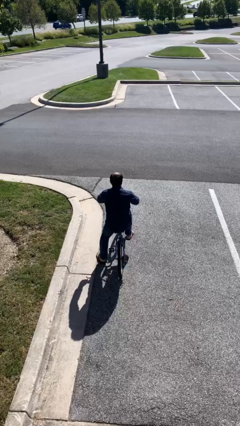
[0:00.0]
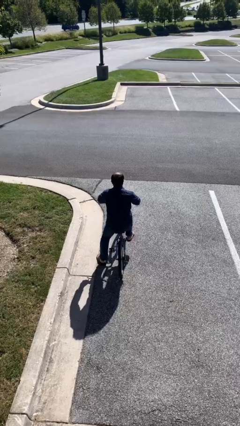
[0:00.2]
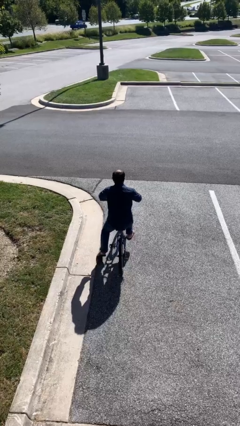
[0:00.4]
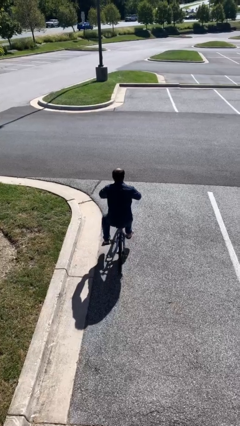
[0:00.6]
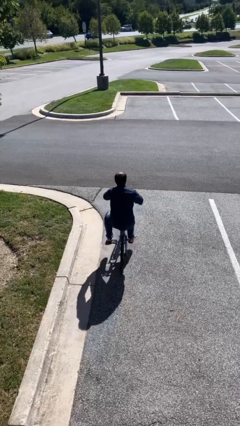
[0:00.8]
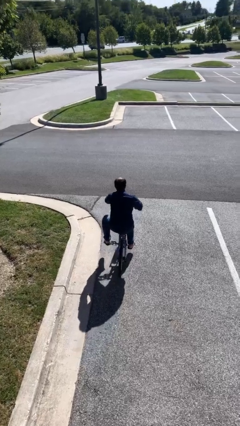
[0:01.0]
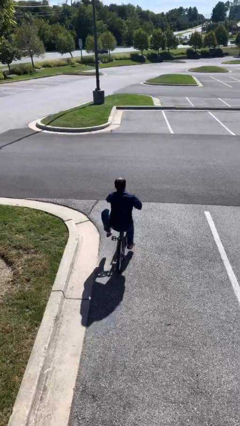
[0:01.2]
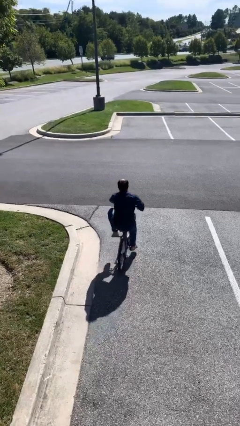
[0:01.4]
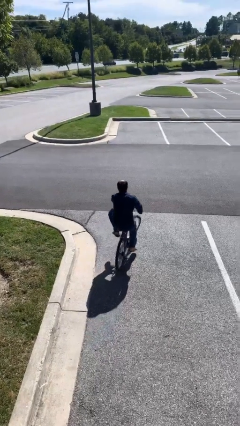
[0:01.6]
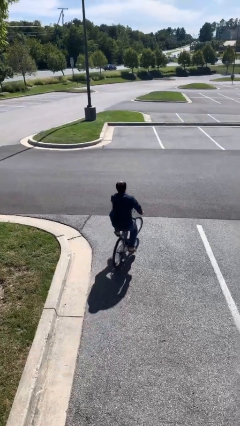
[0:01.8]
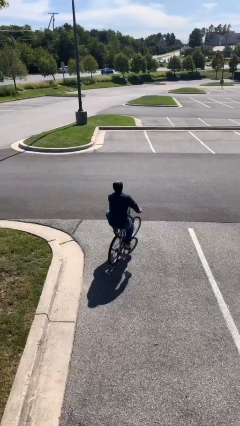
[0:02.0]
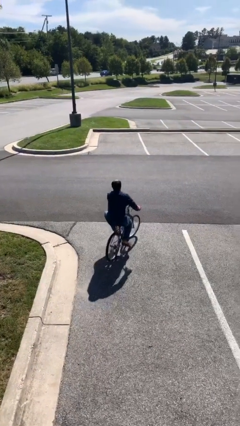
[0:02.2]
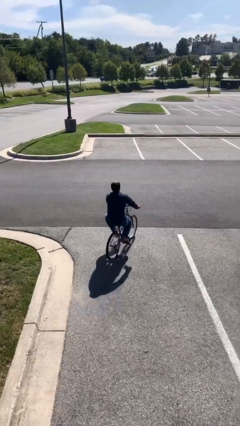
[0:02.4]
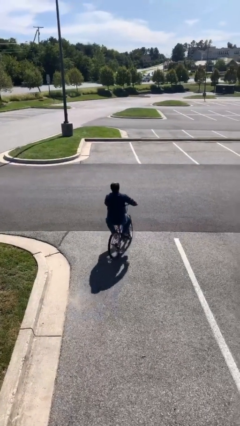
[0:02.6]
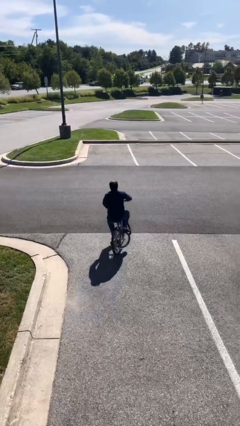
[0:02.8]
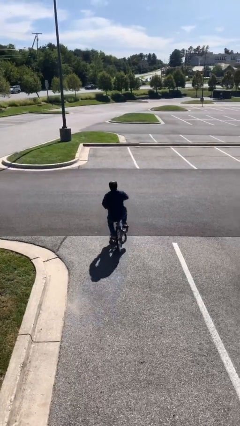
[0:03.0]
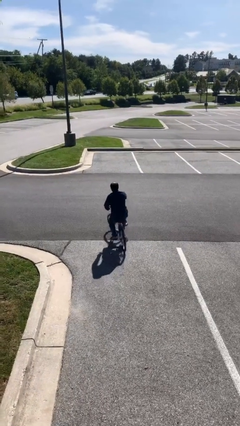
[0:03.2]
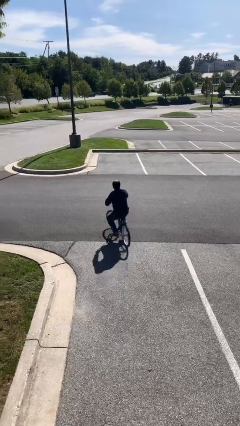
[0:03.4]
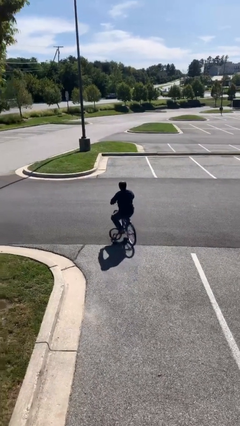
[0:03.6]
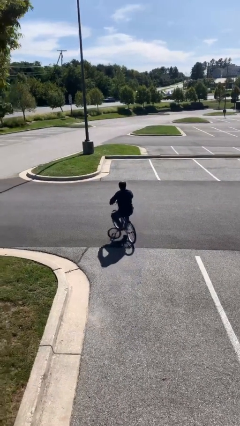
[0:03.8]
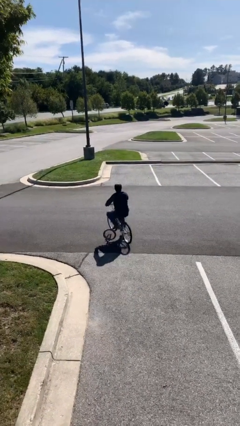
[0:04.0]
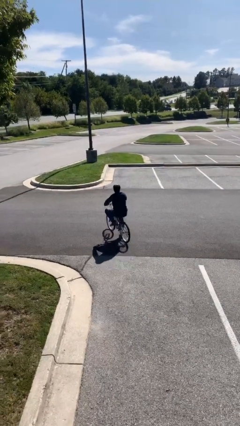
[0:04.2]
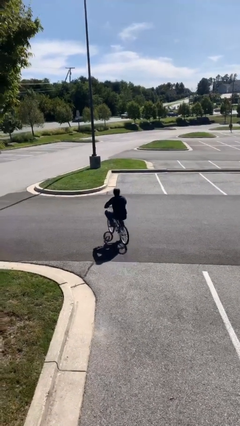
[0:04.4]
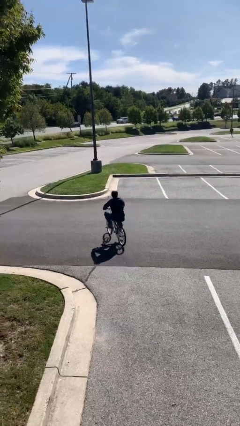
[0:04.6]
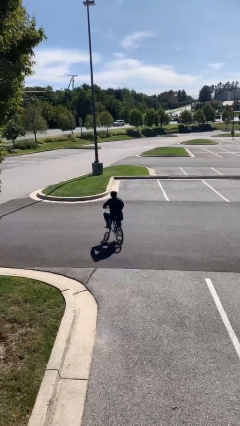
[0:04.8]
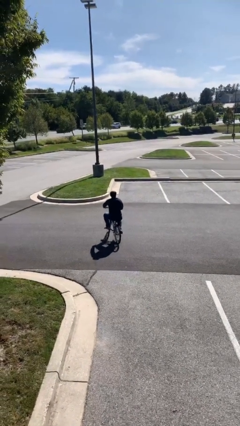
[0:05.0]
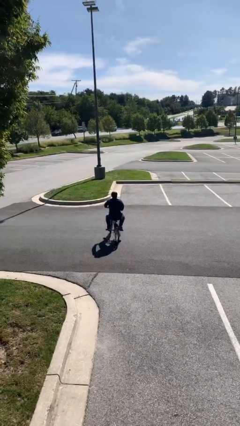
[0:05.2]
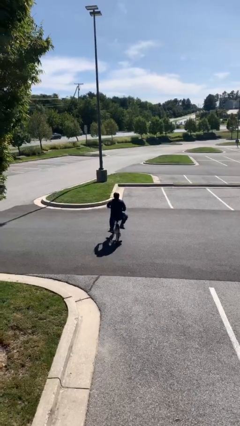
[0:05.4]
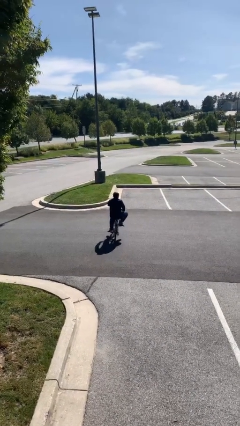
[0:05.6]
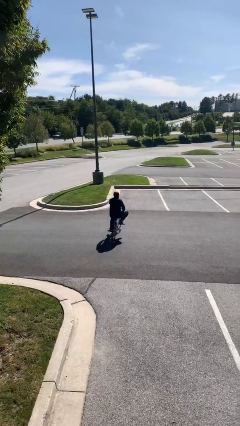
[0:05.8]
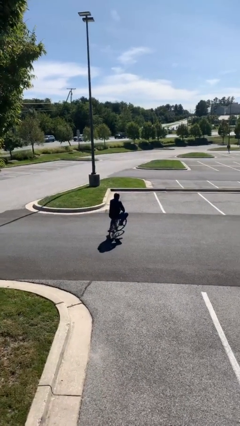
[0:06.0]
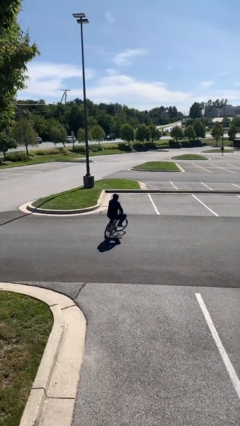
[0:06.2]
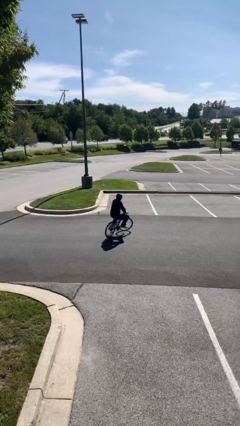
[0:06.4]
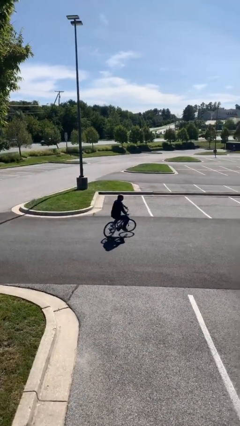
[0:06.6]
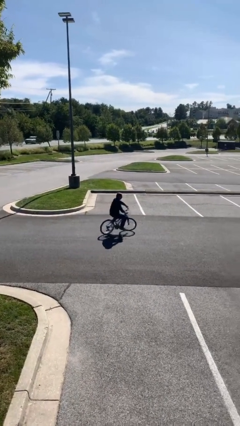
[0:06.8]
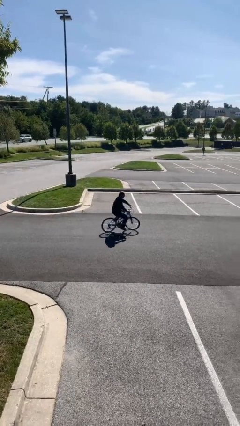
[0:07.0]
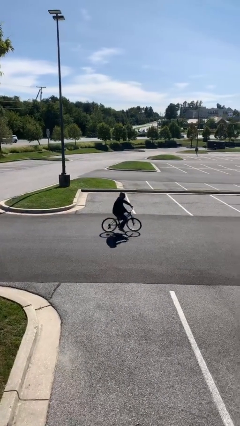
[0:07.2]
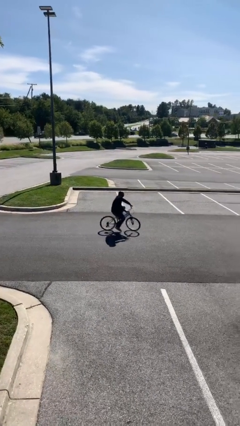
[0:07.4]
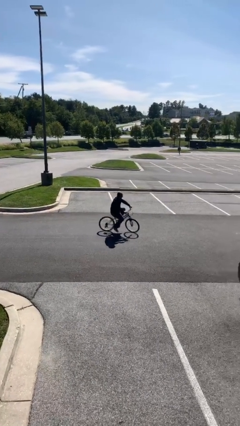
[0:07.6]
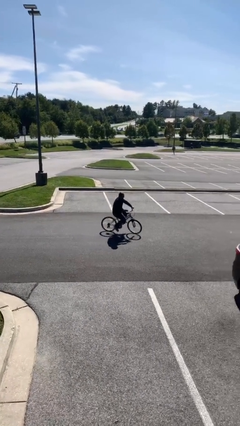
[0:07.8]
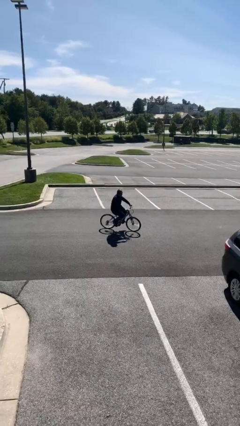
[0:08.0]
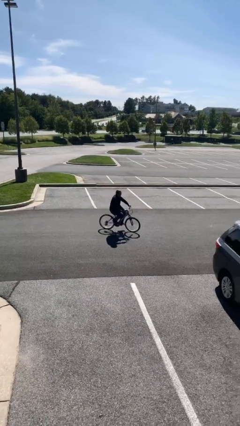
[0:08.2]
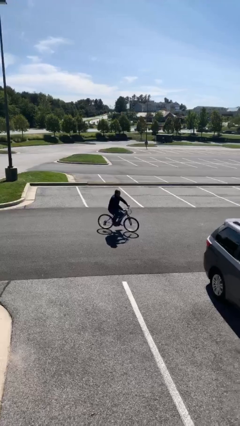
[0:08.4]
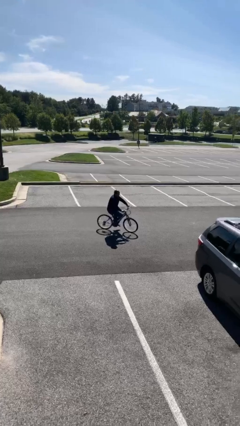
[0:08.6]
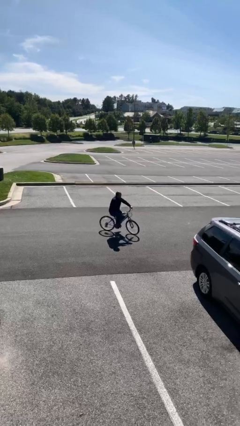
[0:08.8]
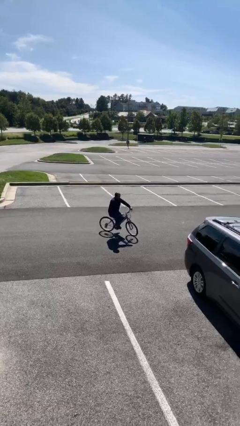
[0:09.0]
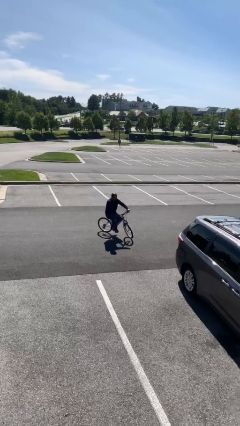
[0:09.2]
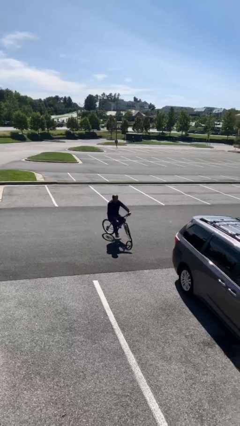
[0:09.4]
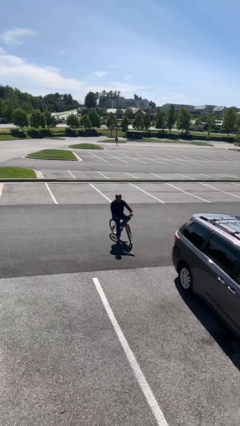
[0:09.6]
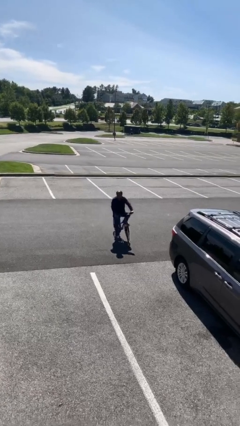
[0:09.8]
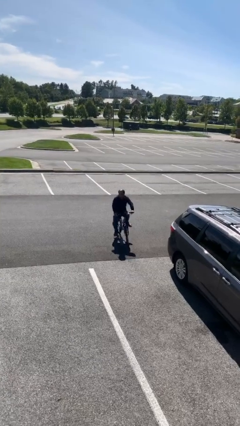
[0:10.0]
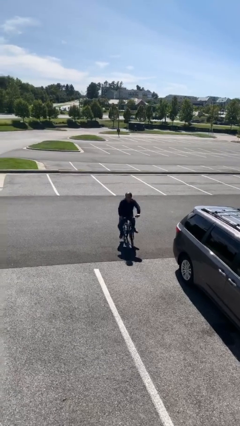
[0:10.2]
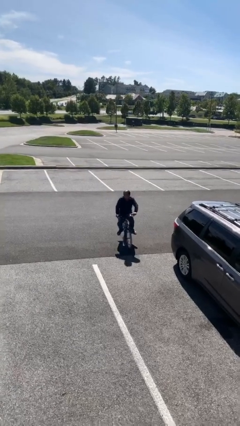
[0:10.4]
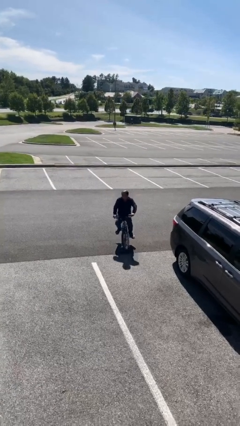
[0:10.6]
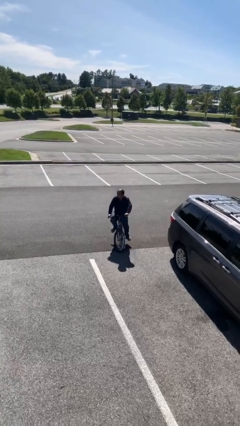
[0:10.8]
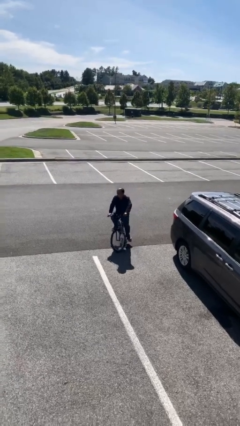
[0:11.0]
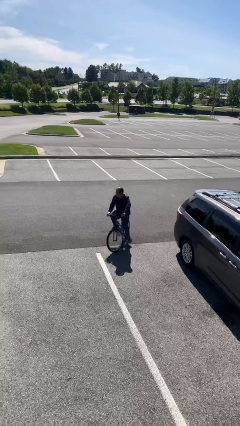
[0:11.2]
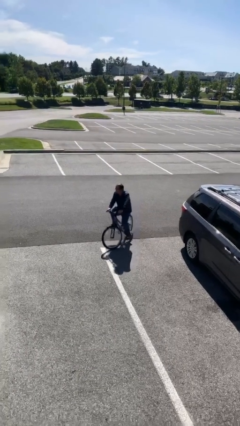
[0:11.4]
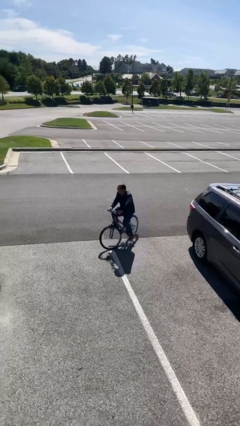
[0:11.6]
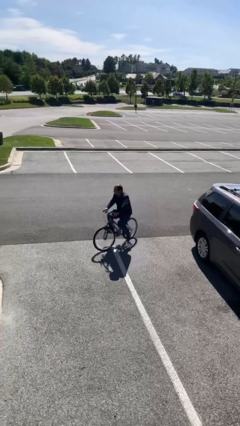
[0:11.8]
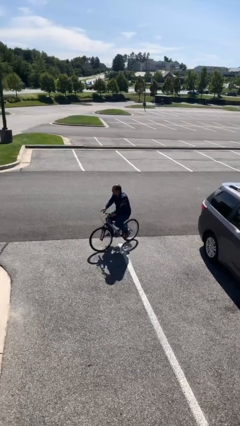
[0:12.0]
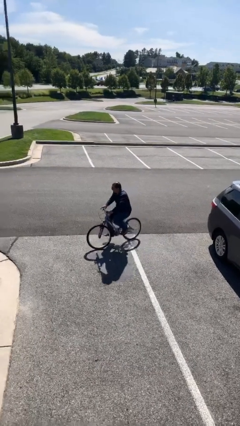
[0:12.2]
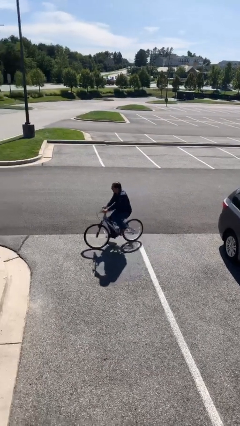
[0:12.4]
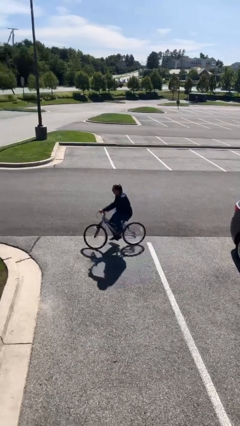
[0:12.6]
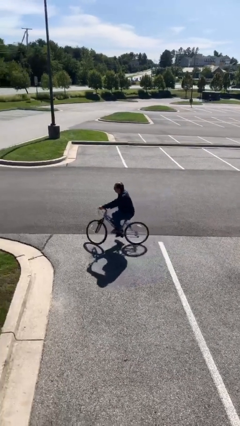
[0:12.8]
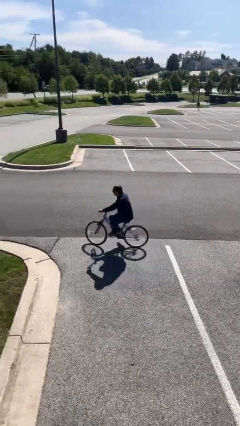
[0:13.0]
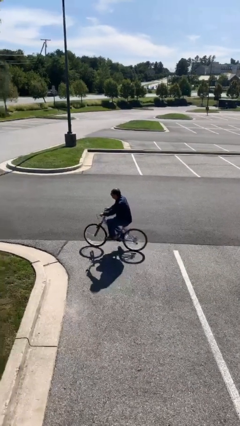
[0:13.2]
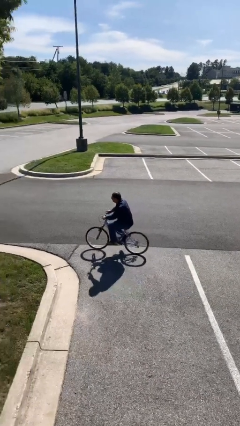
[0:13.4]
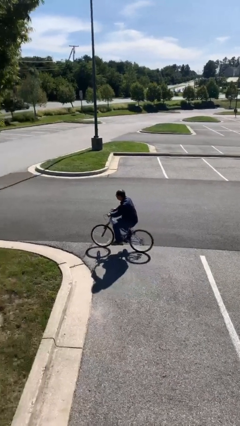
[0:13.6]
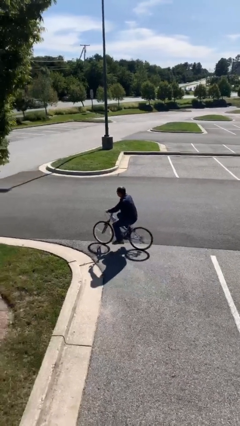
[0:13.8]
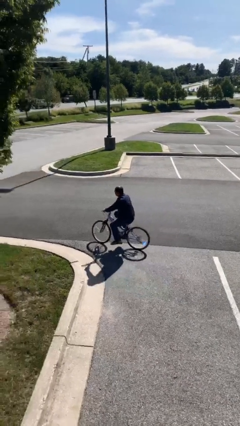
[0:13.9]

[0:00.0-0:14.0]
person rides bicycle

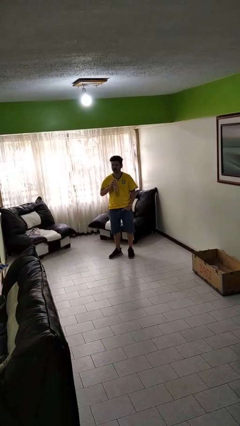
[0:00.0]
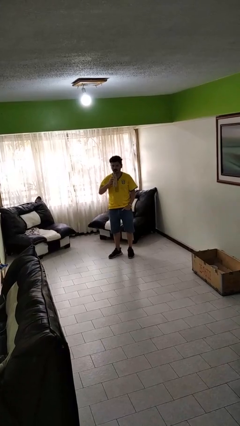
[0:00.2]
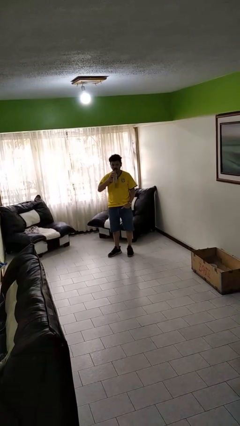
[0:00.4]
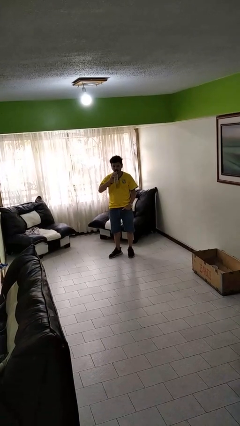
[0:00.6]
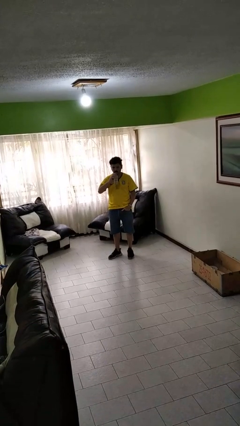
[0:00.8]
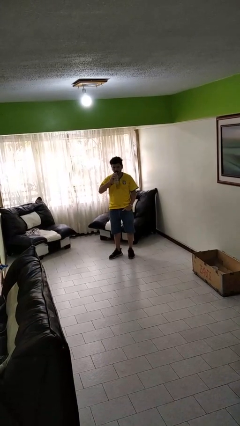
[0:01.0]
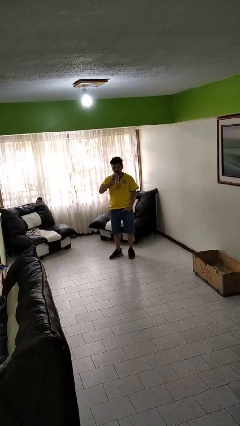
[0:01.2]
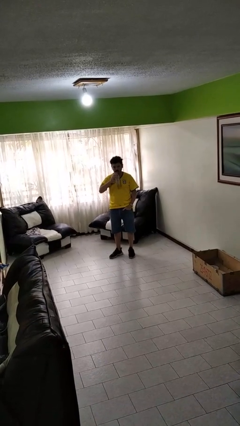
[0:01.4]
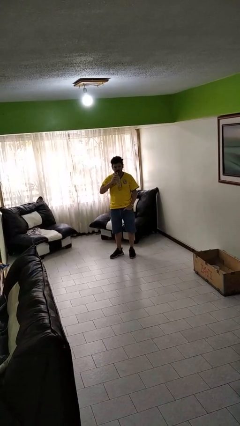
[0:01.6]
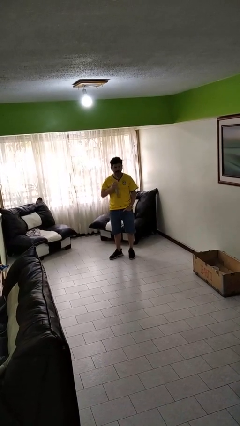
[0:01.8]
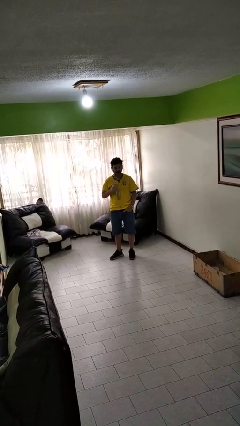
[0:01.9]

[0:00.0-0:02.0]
person drinks from straw

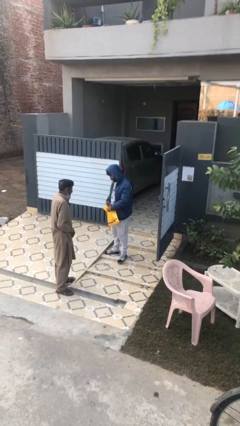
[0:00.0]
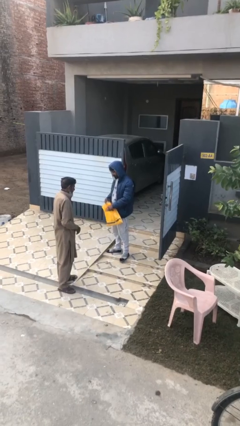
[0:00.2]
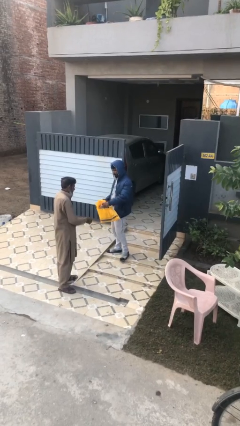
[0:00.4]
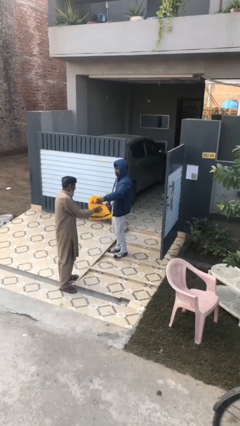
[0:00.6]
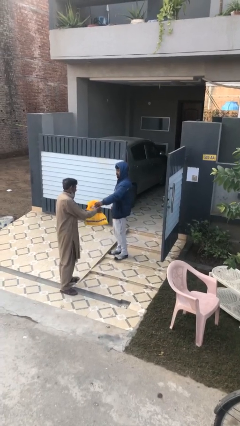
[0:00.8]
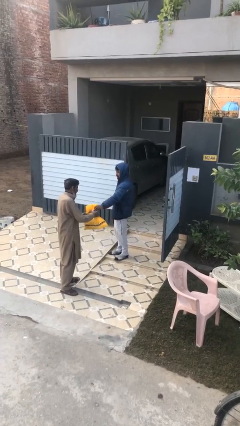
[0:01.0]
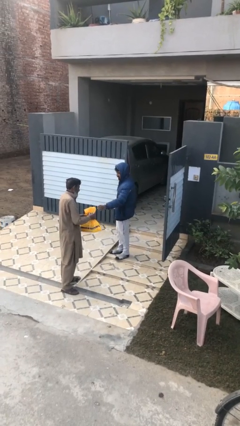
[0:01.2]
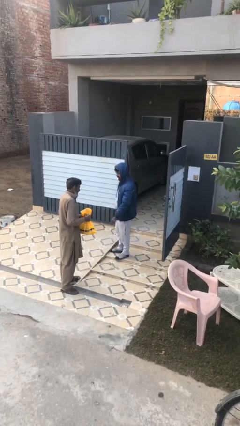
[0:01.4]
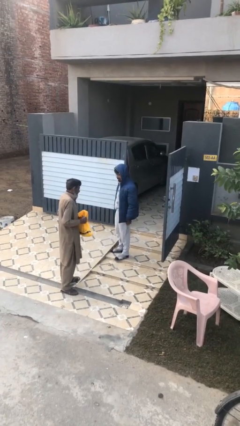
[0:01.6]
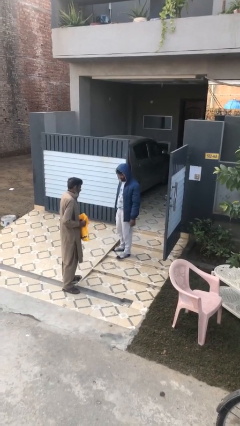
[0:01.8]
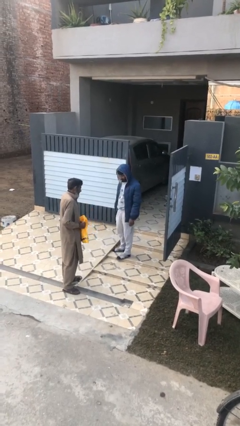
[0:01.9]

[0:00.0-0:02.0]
person transfers object to person
